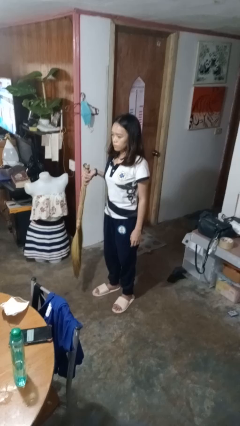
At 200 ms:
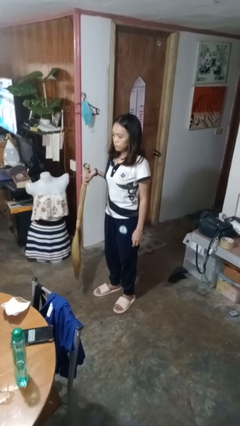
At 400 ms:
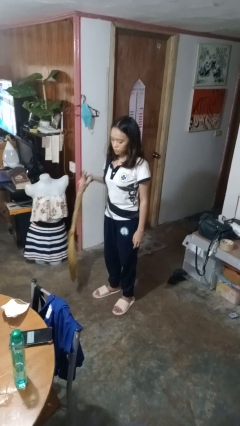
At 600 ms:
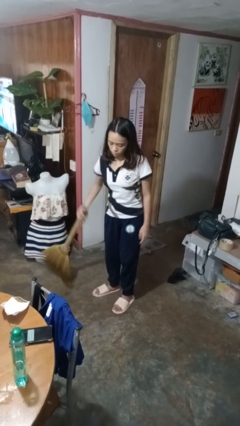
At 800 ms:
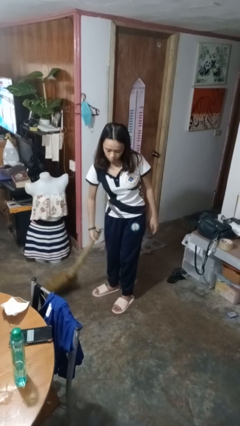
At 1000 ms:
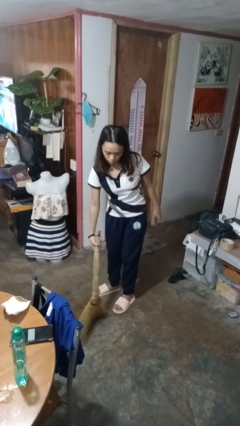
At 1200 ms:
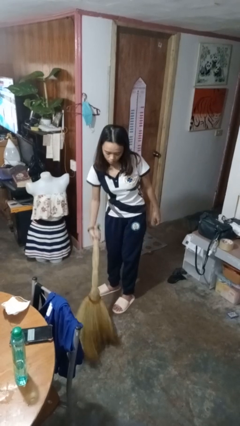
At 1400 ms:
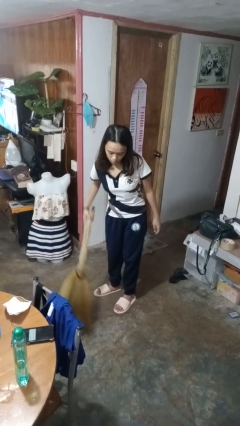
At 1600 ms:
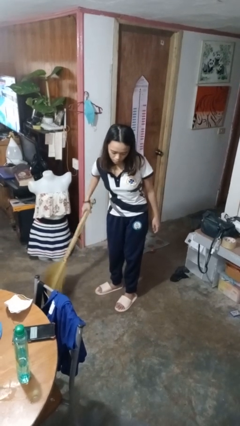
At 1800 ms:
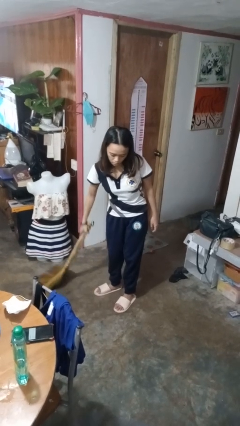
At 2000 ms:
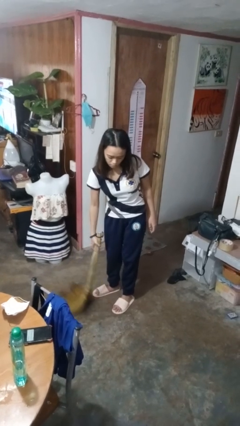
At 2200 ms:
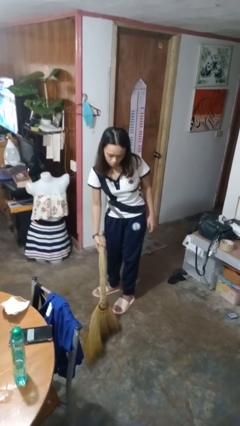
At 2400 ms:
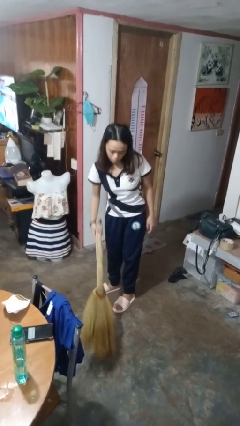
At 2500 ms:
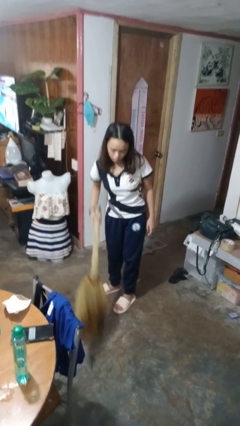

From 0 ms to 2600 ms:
person sweeps floor

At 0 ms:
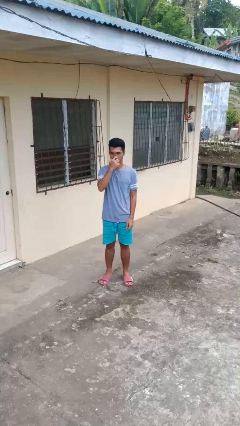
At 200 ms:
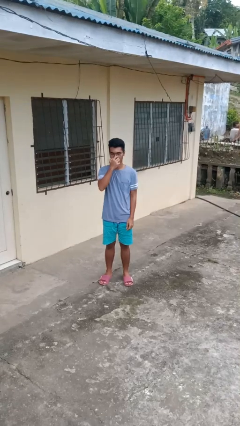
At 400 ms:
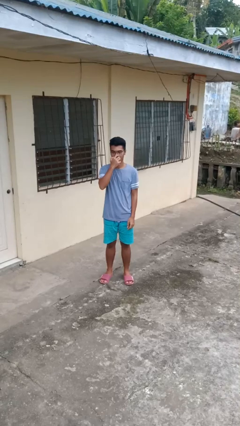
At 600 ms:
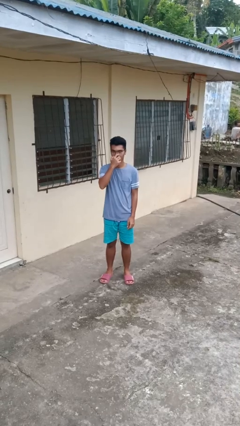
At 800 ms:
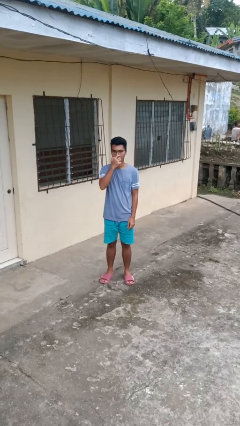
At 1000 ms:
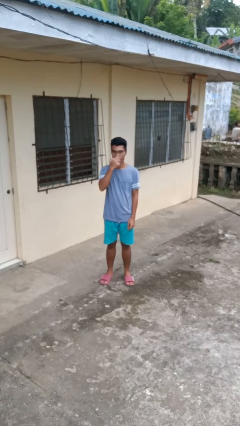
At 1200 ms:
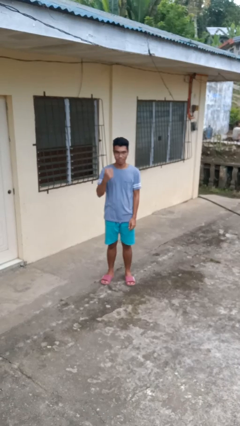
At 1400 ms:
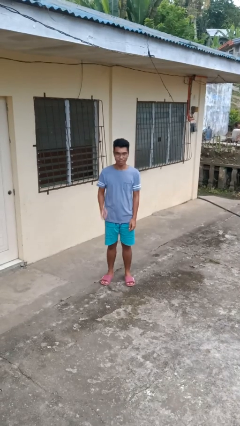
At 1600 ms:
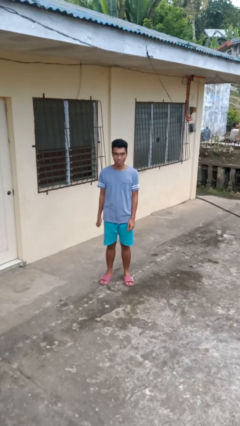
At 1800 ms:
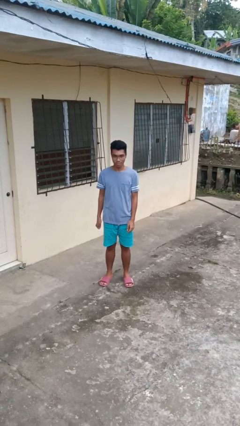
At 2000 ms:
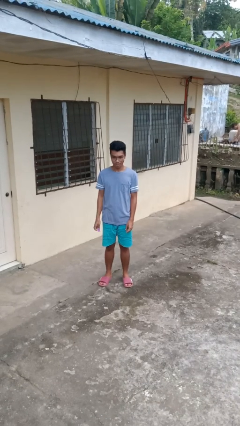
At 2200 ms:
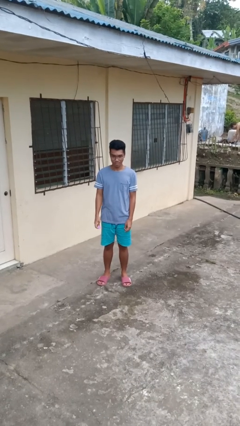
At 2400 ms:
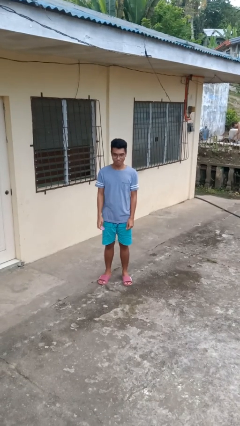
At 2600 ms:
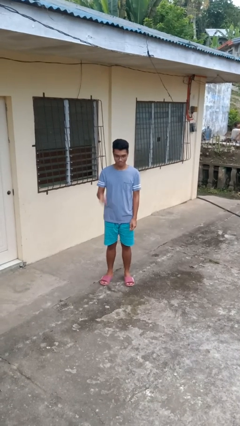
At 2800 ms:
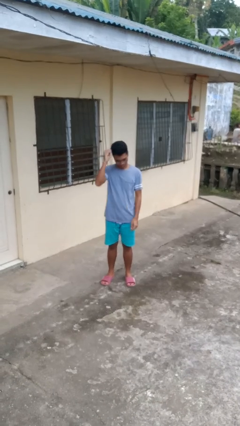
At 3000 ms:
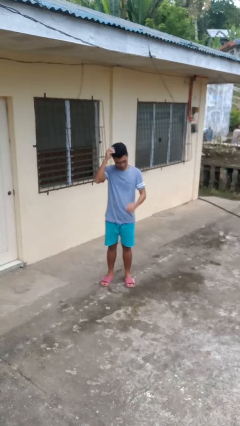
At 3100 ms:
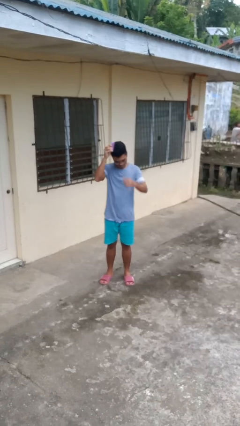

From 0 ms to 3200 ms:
person brushes hair

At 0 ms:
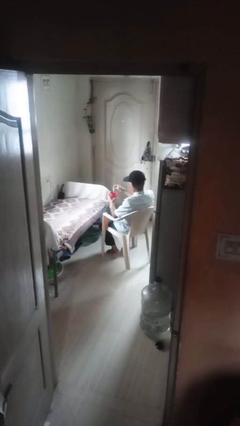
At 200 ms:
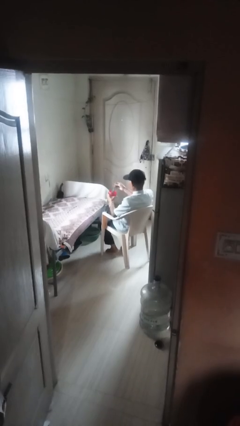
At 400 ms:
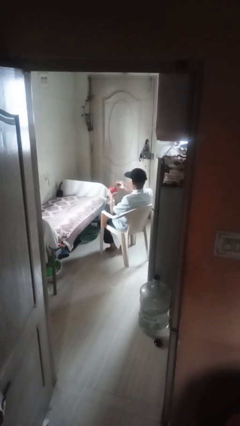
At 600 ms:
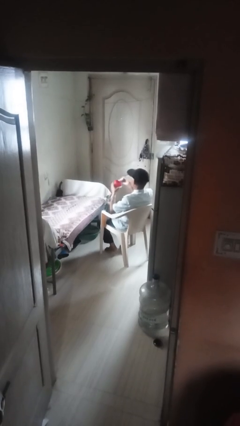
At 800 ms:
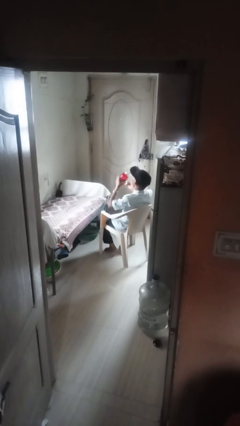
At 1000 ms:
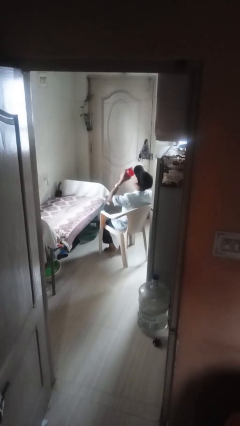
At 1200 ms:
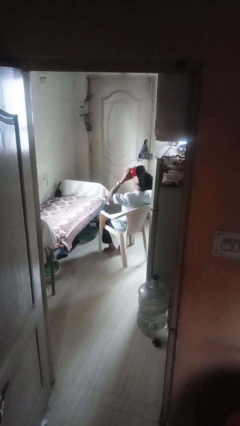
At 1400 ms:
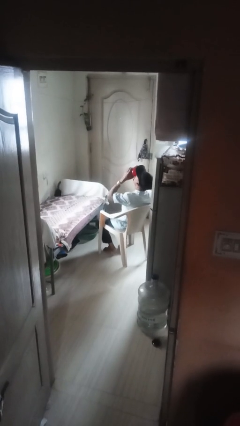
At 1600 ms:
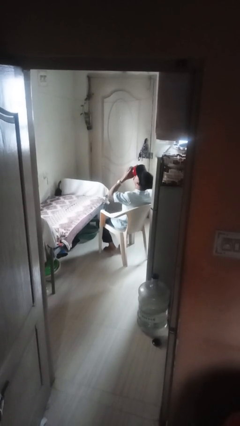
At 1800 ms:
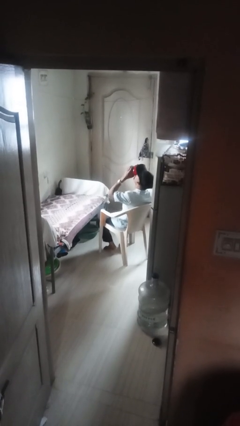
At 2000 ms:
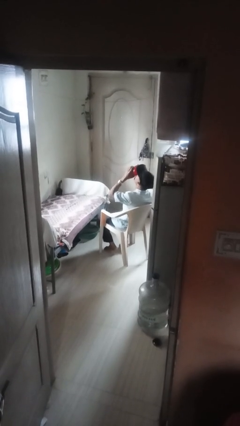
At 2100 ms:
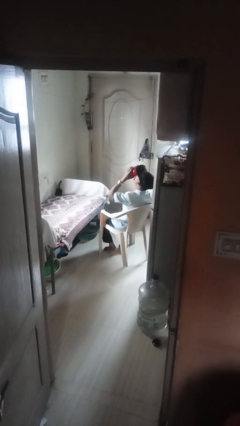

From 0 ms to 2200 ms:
person drinks from mug

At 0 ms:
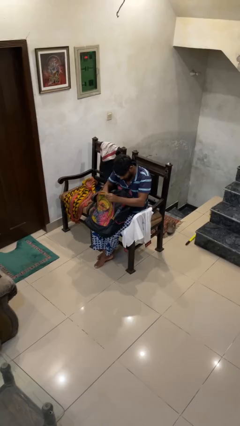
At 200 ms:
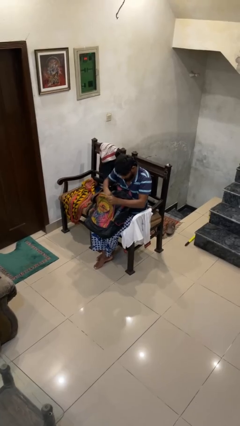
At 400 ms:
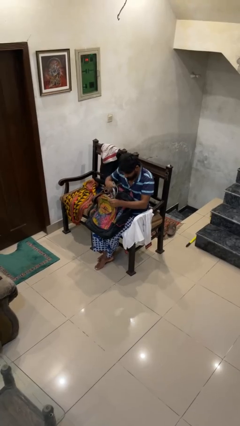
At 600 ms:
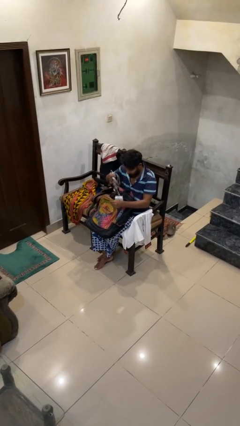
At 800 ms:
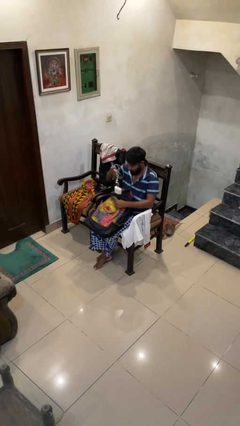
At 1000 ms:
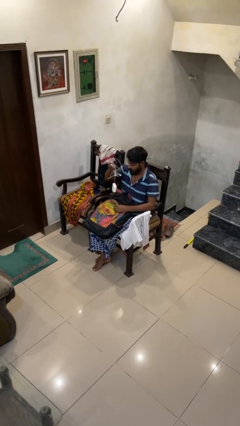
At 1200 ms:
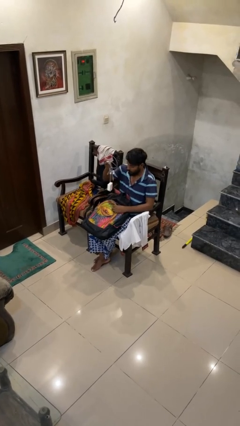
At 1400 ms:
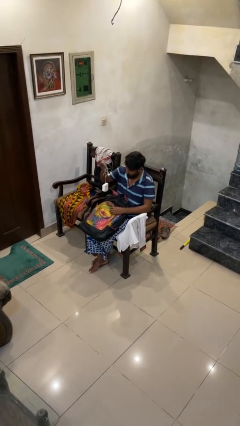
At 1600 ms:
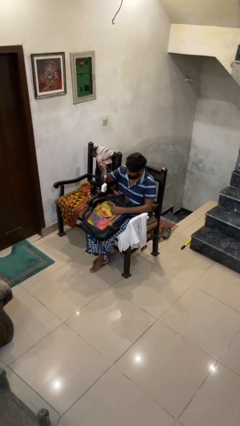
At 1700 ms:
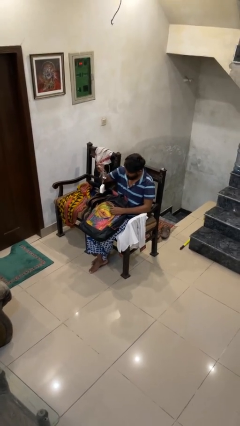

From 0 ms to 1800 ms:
person takes object from backpack

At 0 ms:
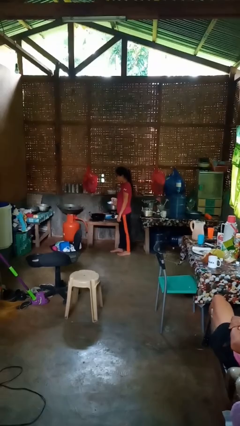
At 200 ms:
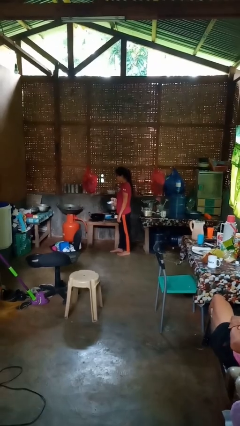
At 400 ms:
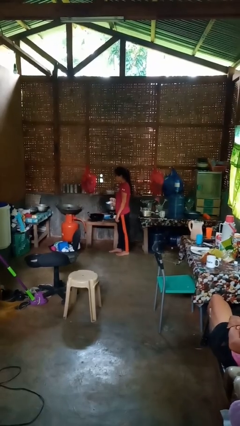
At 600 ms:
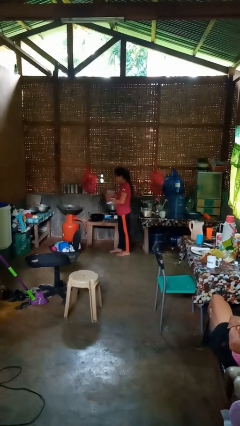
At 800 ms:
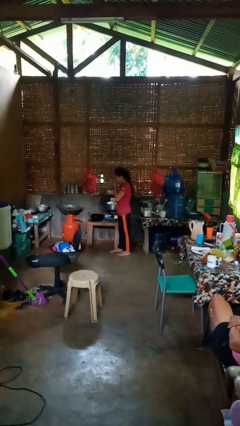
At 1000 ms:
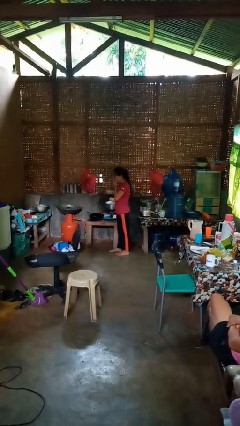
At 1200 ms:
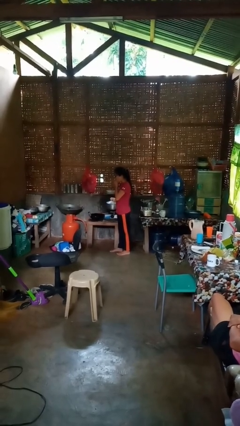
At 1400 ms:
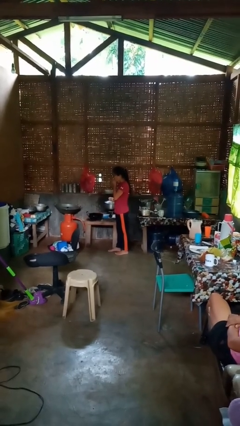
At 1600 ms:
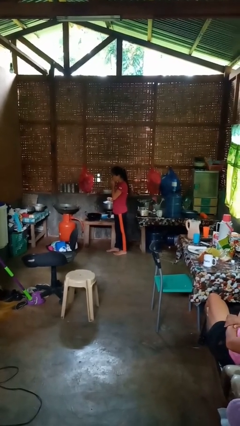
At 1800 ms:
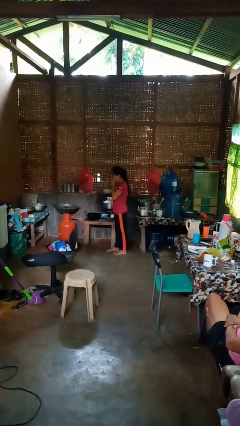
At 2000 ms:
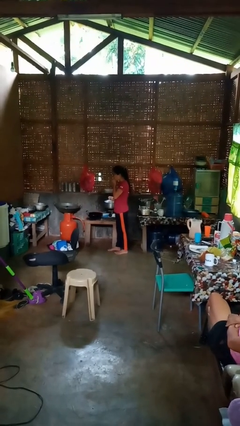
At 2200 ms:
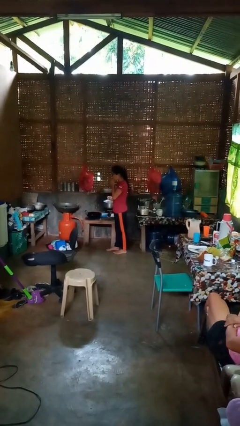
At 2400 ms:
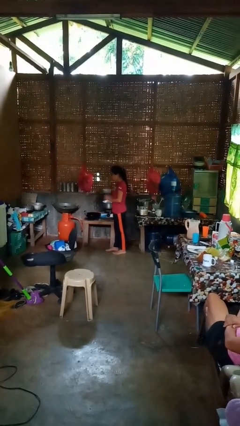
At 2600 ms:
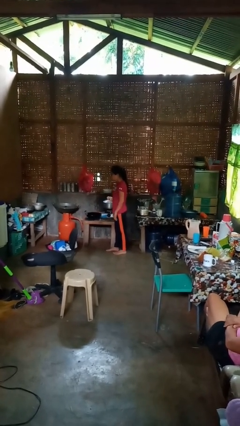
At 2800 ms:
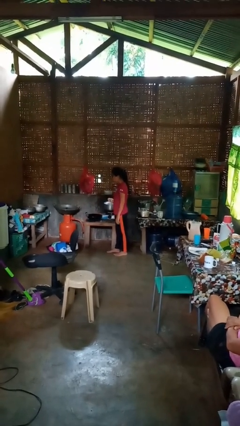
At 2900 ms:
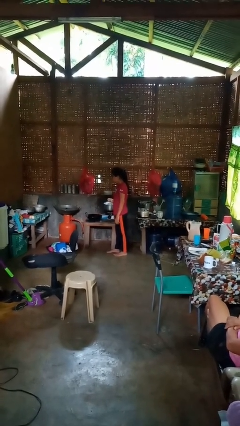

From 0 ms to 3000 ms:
person burns hand

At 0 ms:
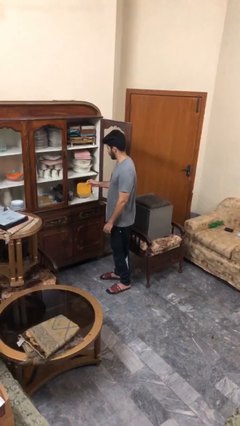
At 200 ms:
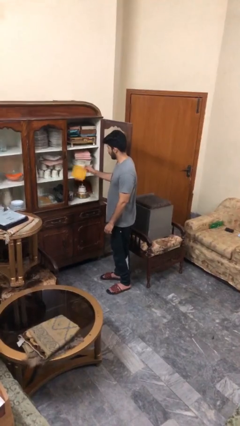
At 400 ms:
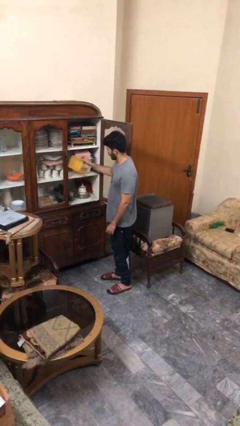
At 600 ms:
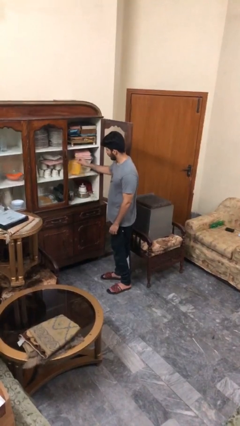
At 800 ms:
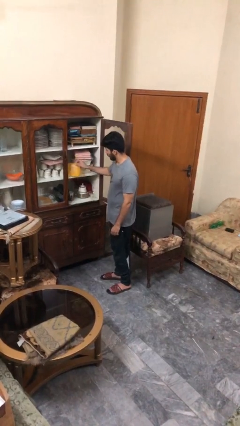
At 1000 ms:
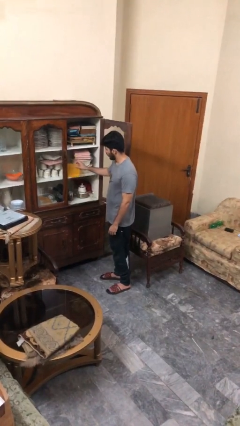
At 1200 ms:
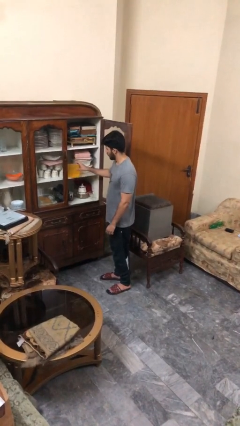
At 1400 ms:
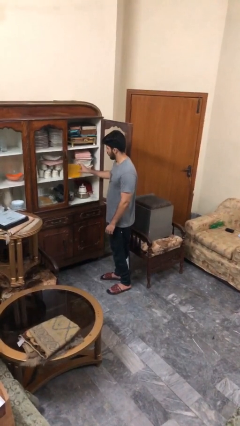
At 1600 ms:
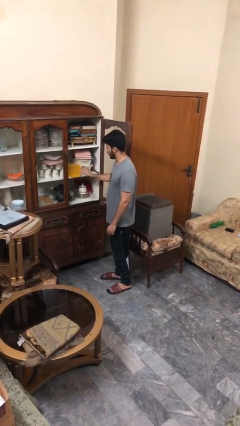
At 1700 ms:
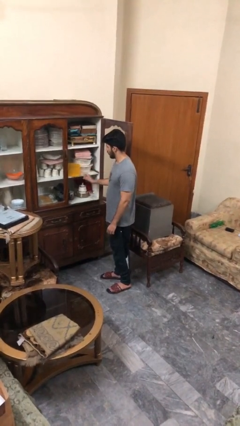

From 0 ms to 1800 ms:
person puts down object into cabinet

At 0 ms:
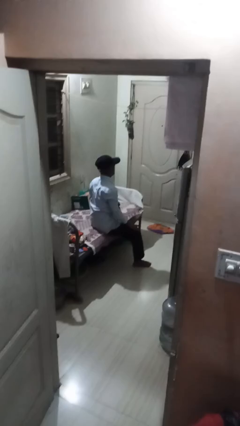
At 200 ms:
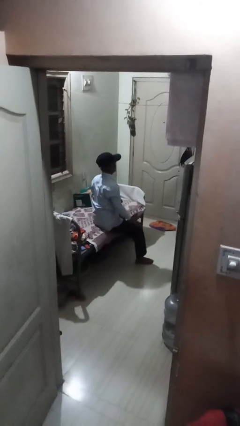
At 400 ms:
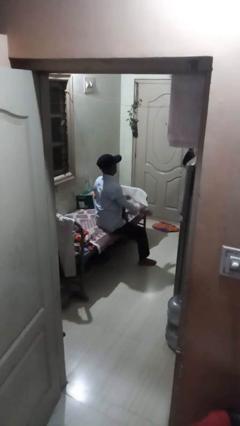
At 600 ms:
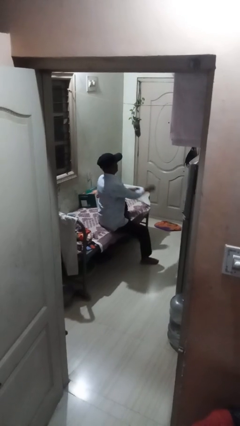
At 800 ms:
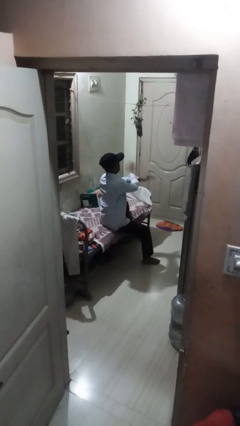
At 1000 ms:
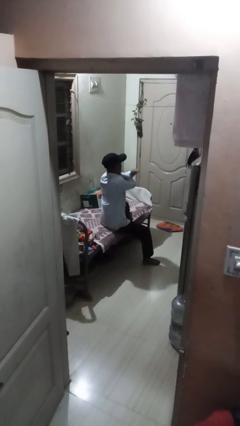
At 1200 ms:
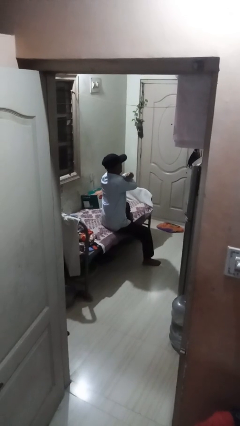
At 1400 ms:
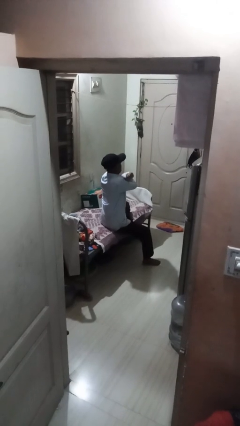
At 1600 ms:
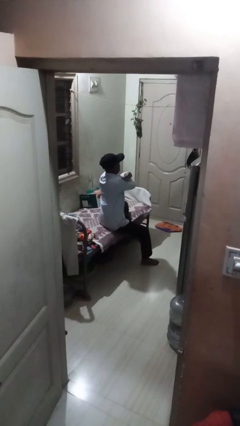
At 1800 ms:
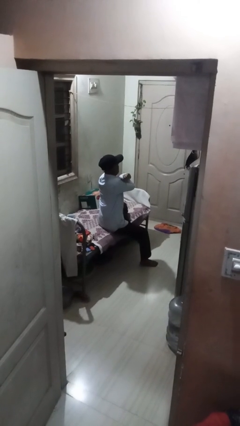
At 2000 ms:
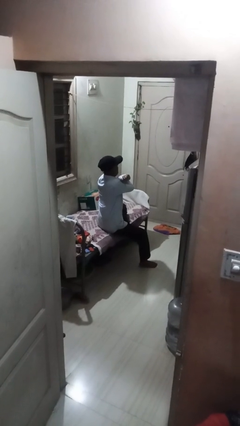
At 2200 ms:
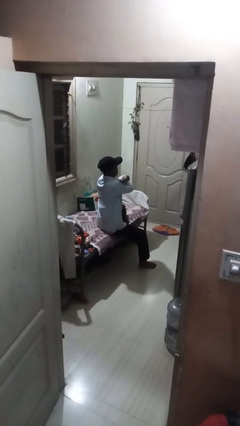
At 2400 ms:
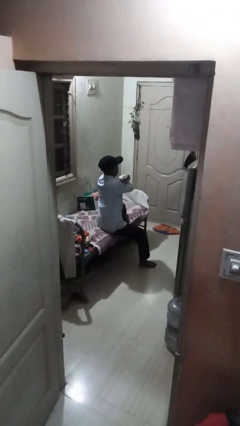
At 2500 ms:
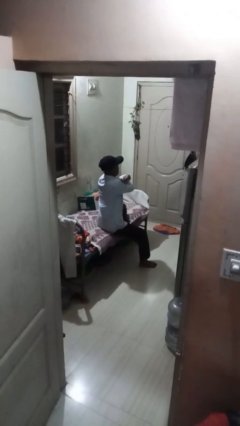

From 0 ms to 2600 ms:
person gestures arms x
